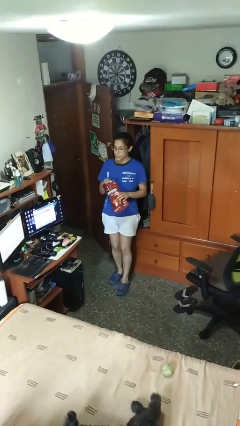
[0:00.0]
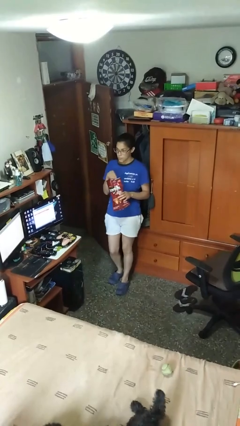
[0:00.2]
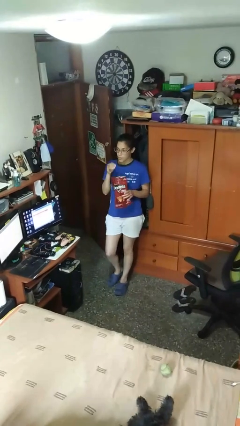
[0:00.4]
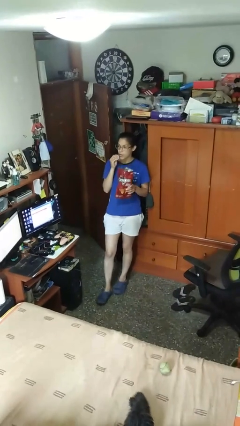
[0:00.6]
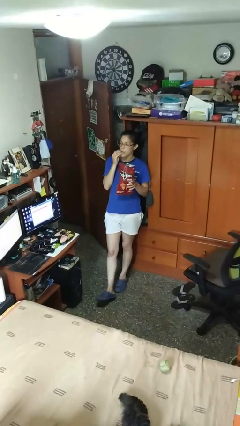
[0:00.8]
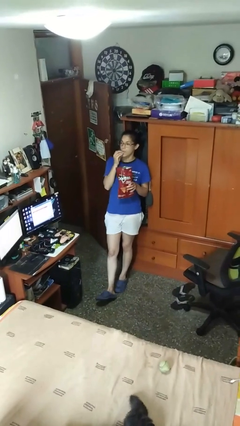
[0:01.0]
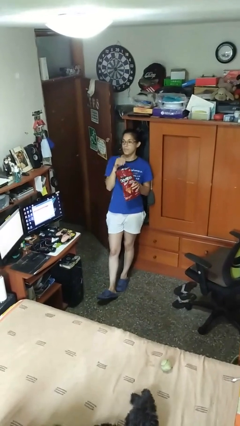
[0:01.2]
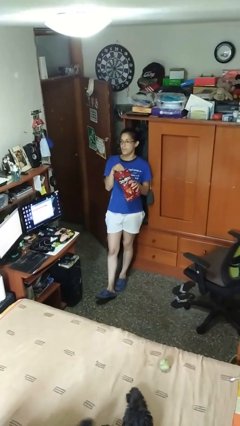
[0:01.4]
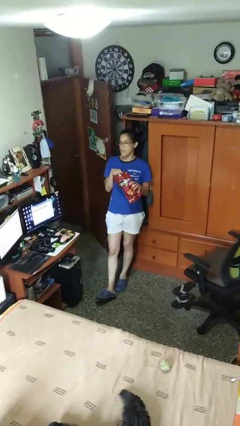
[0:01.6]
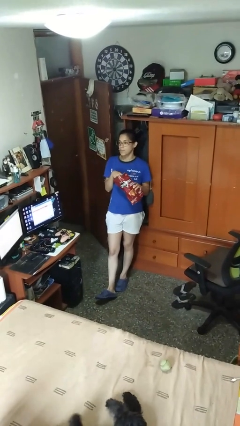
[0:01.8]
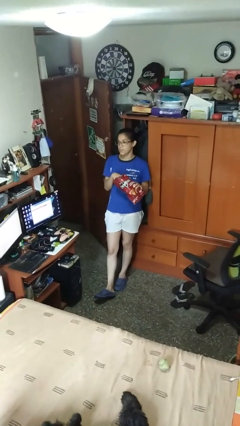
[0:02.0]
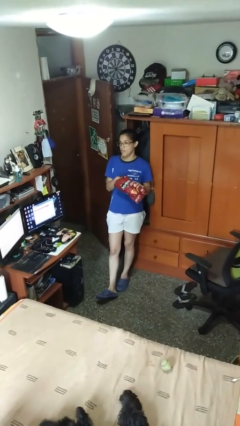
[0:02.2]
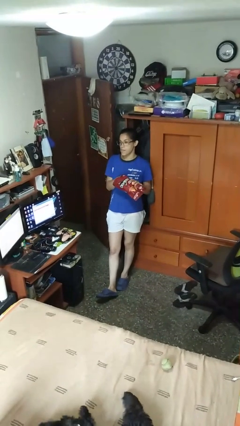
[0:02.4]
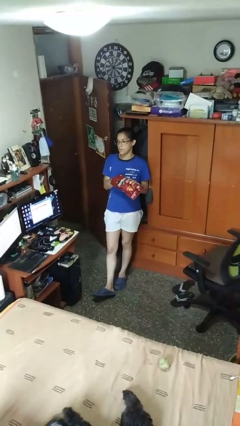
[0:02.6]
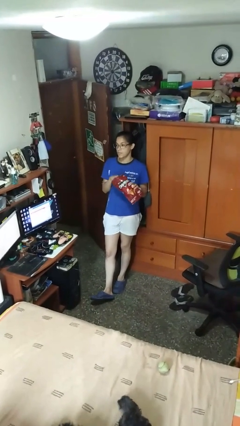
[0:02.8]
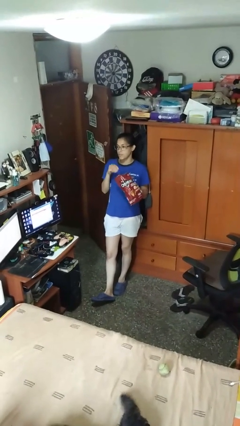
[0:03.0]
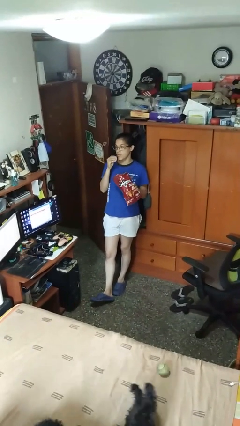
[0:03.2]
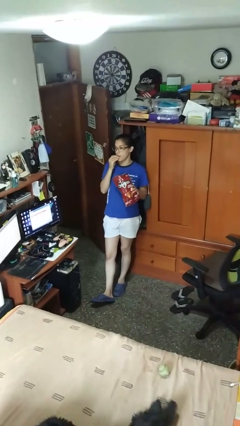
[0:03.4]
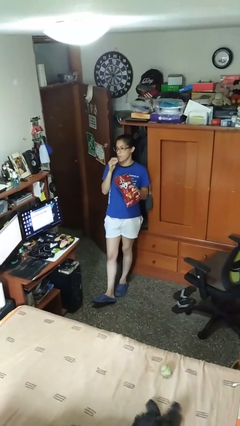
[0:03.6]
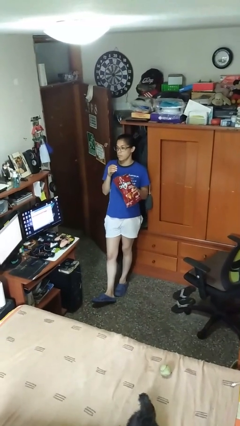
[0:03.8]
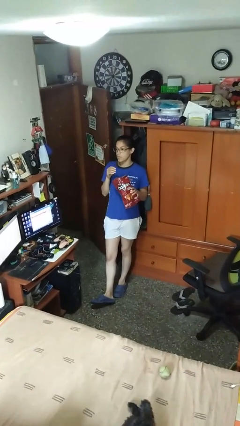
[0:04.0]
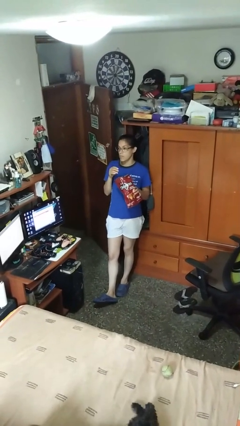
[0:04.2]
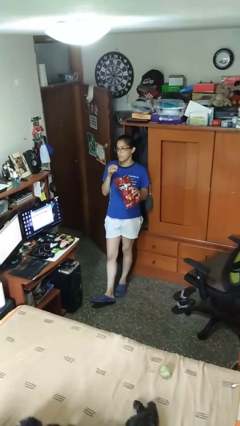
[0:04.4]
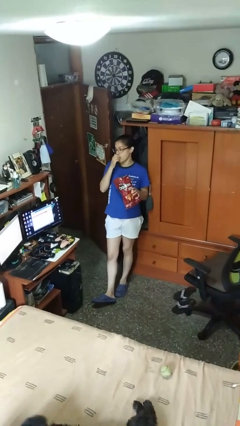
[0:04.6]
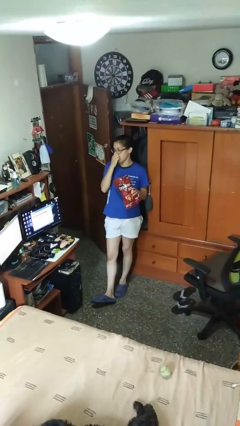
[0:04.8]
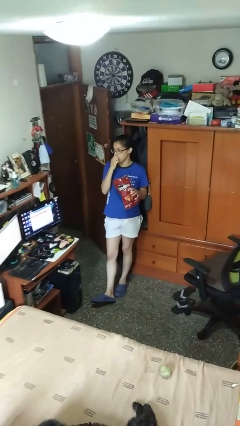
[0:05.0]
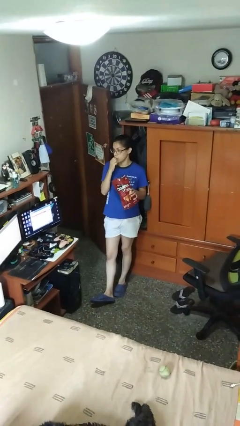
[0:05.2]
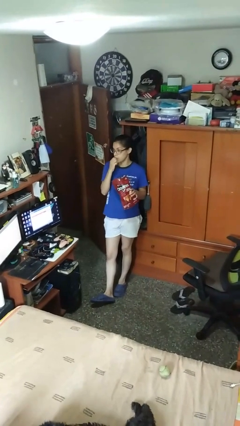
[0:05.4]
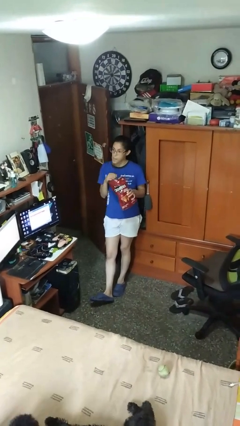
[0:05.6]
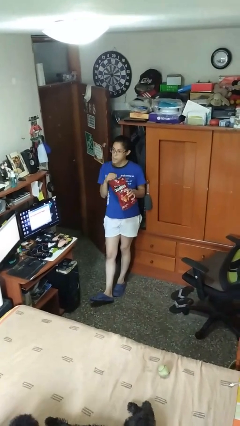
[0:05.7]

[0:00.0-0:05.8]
person eats snack from bag

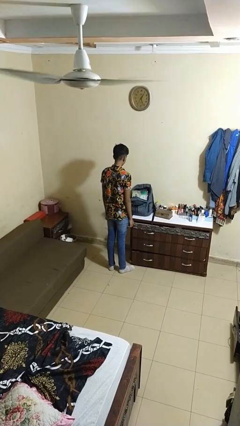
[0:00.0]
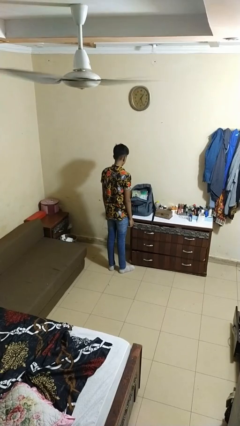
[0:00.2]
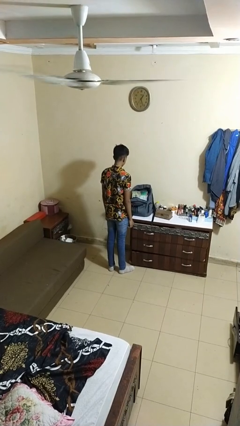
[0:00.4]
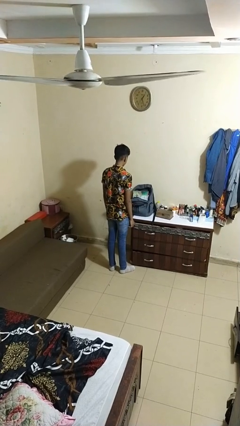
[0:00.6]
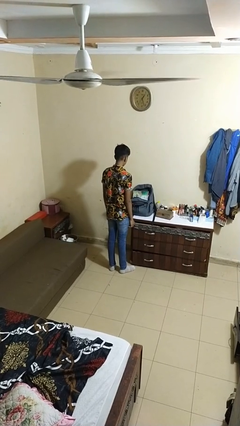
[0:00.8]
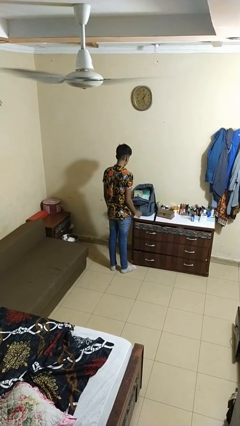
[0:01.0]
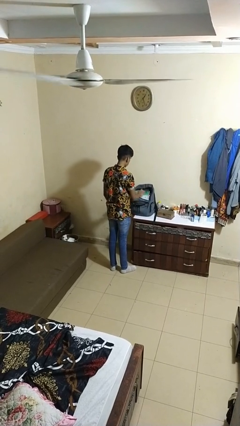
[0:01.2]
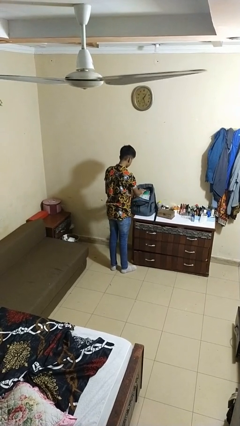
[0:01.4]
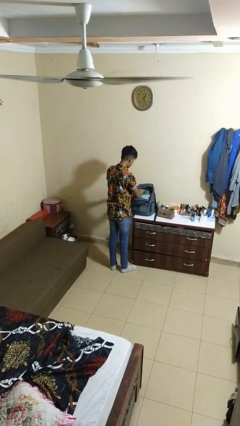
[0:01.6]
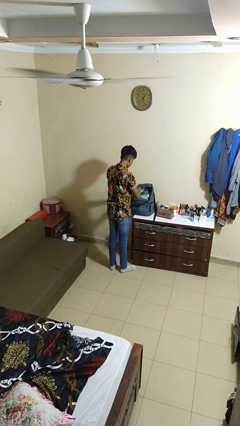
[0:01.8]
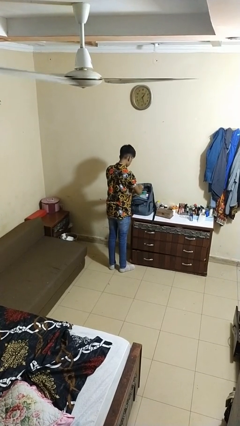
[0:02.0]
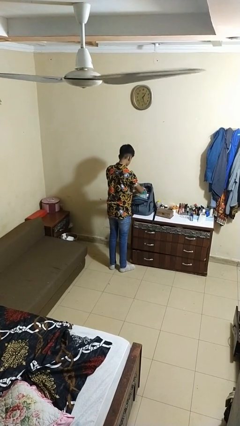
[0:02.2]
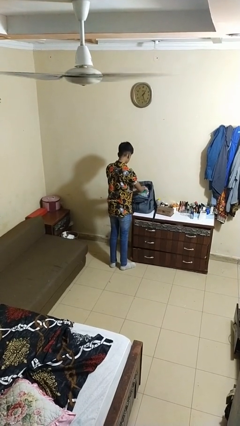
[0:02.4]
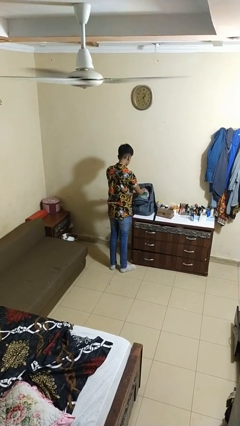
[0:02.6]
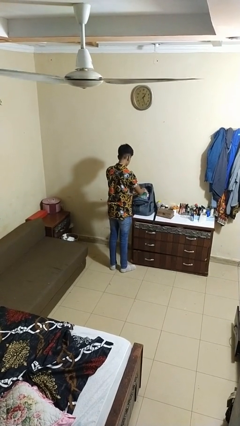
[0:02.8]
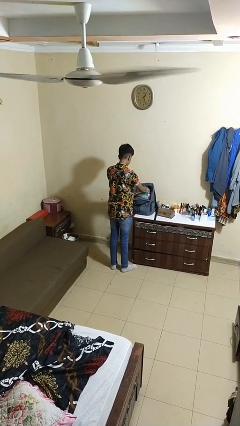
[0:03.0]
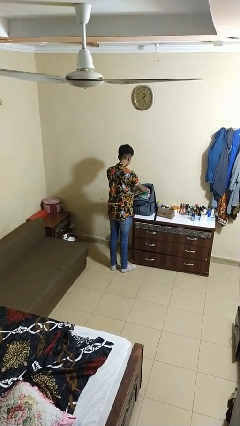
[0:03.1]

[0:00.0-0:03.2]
person searches in backpack

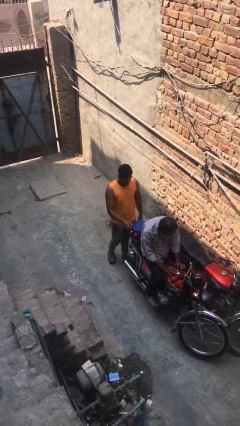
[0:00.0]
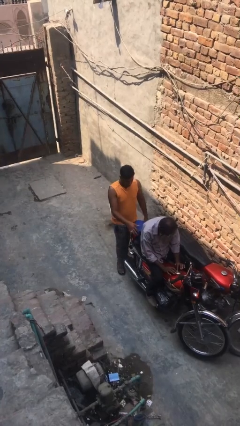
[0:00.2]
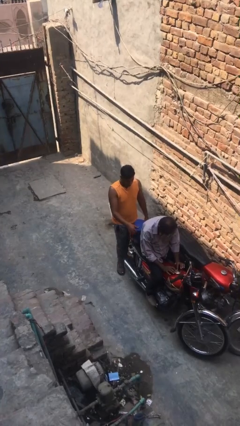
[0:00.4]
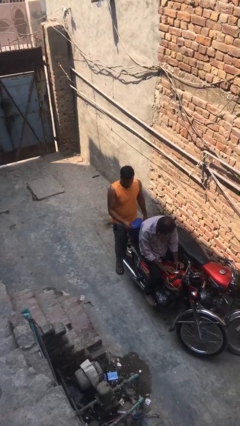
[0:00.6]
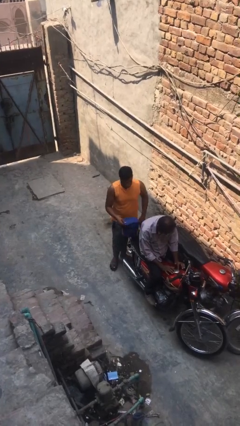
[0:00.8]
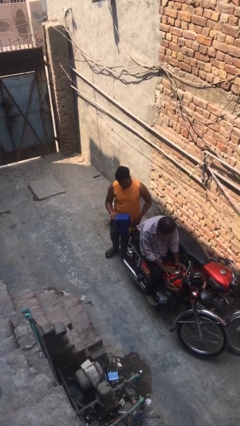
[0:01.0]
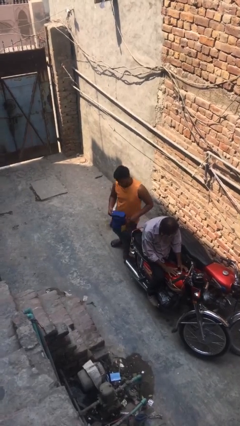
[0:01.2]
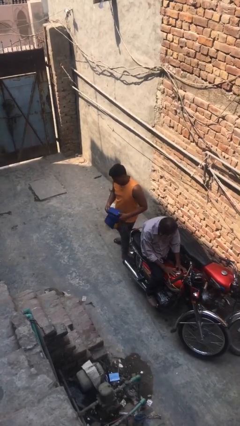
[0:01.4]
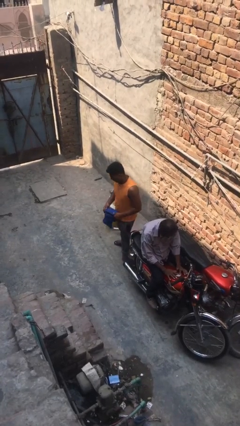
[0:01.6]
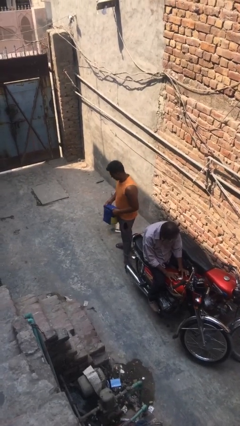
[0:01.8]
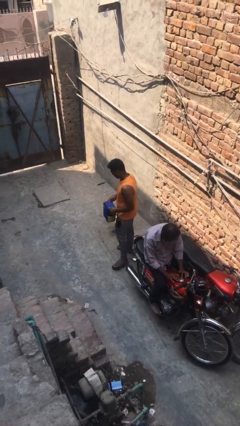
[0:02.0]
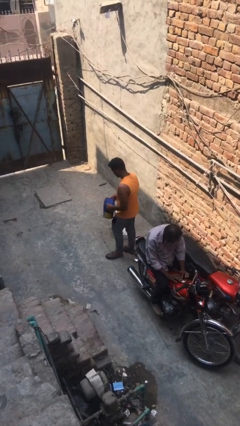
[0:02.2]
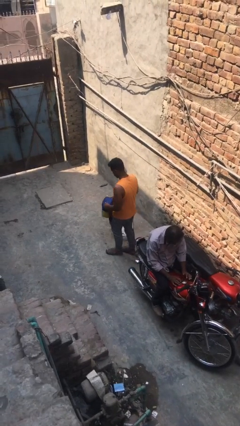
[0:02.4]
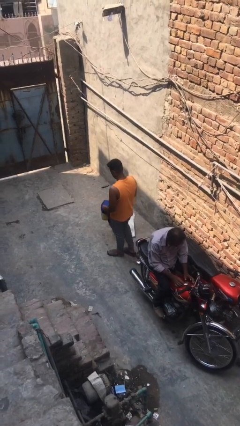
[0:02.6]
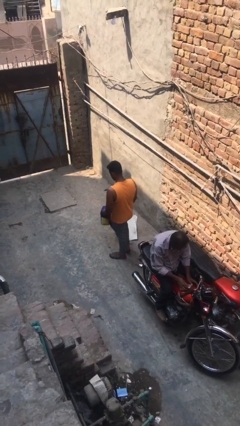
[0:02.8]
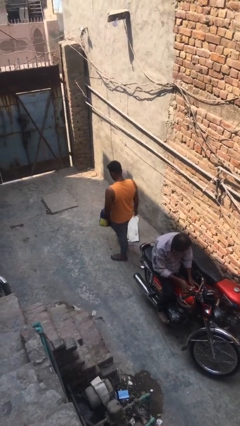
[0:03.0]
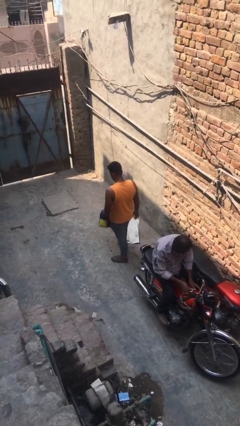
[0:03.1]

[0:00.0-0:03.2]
person steals object from person

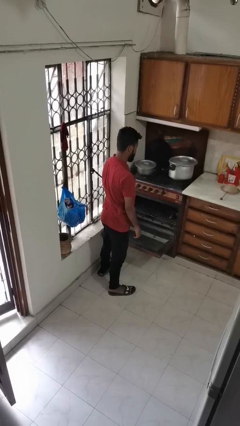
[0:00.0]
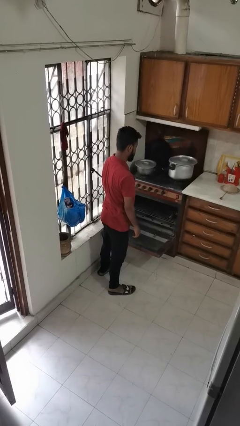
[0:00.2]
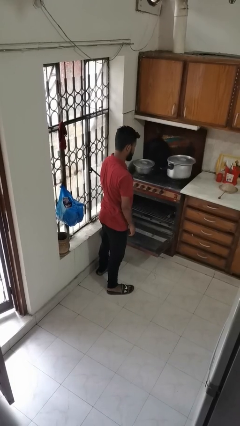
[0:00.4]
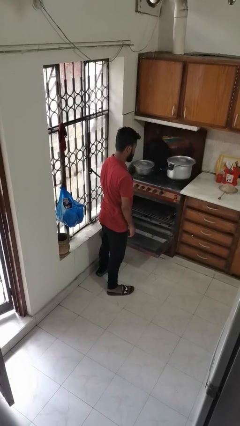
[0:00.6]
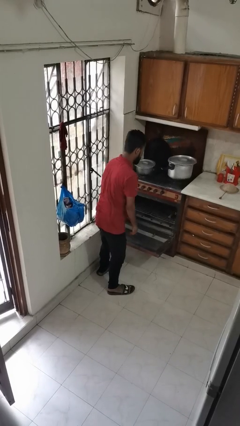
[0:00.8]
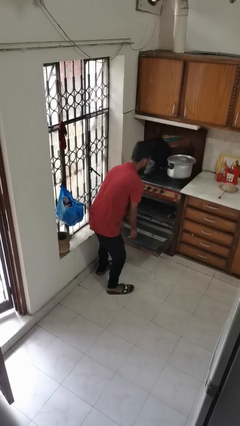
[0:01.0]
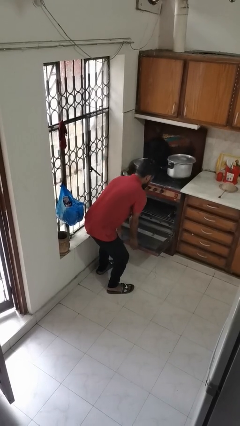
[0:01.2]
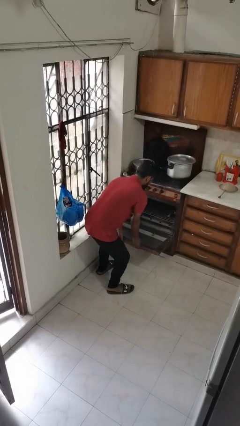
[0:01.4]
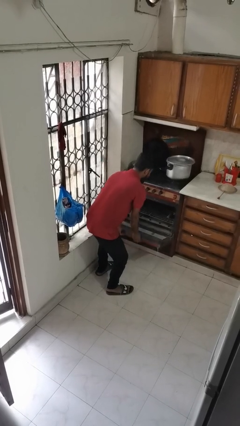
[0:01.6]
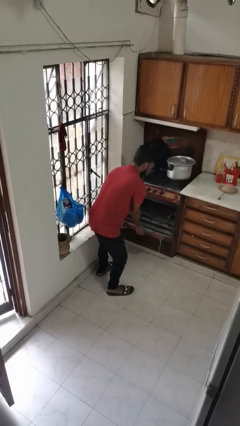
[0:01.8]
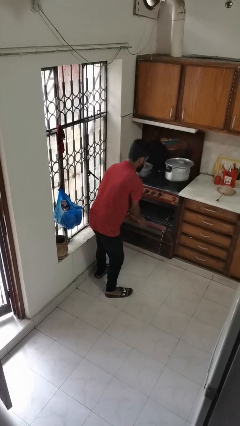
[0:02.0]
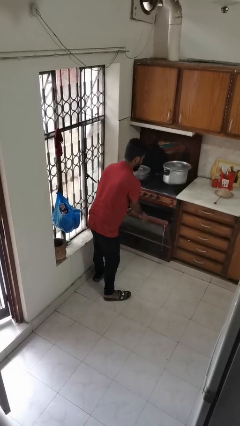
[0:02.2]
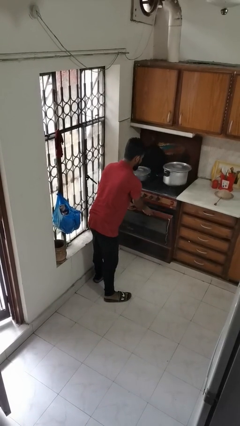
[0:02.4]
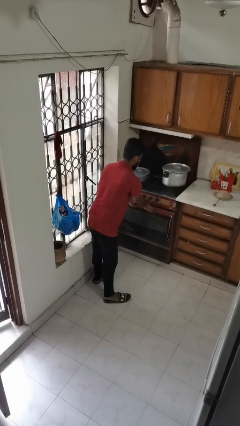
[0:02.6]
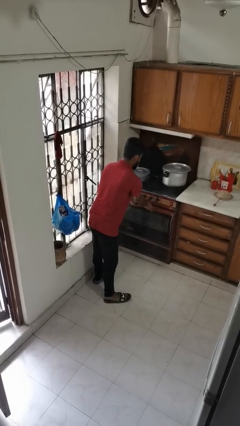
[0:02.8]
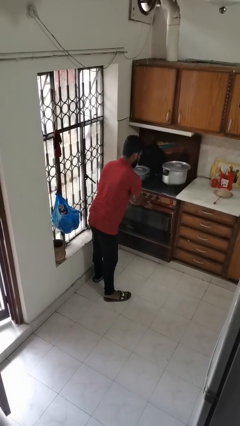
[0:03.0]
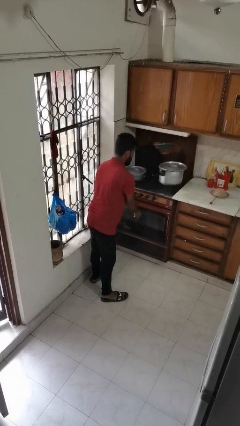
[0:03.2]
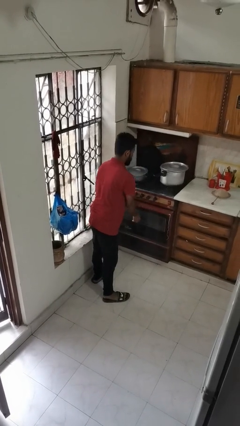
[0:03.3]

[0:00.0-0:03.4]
person closes oven door

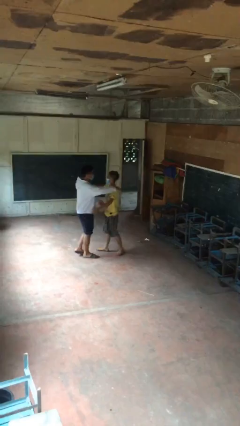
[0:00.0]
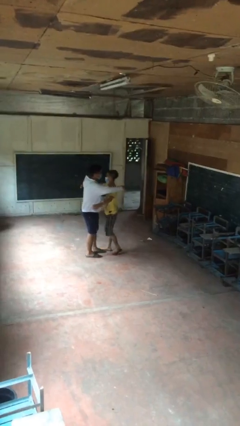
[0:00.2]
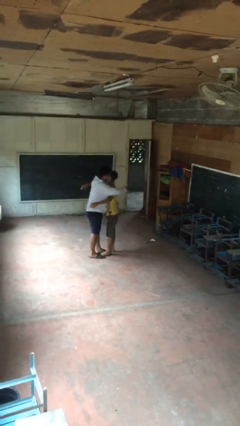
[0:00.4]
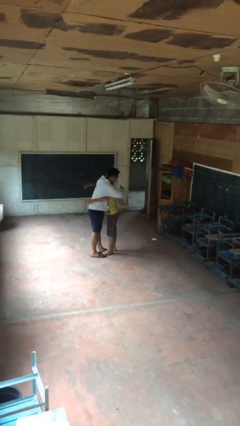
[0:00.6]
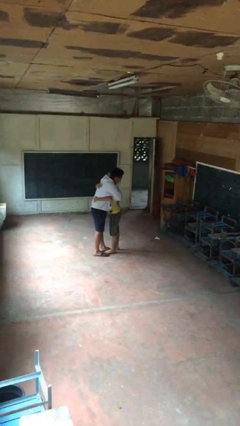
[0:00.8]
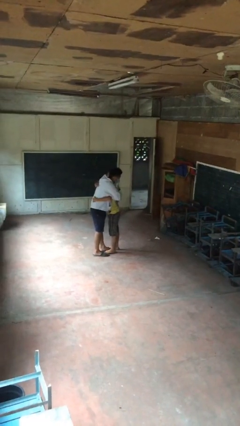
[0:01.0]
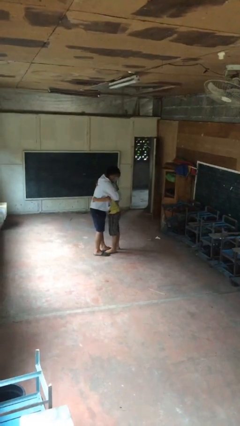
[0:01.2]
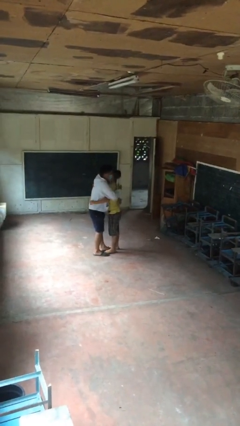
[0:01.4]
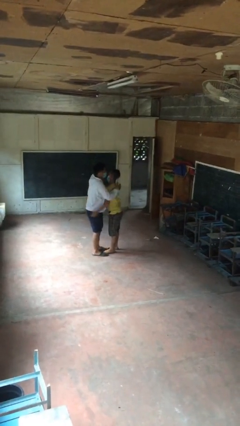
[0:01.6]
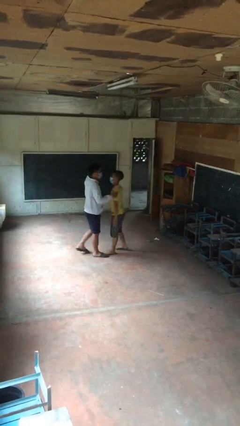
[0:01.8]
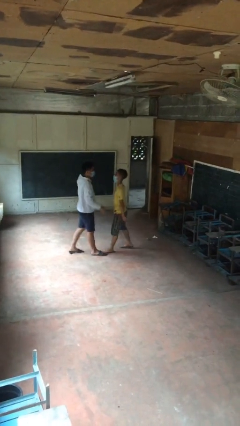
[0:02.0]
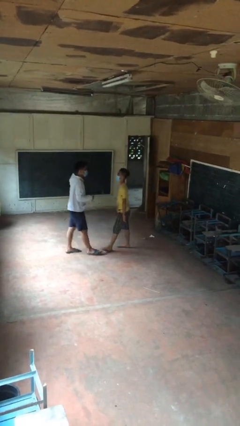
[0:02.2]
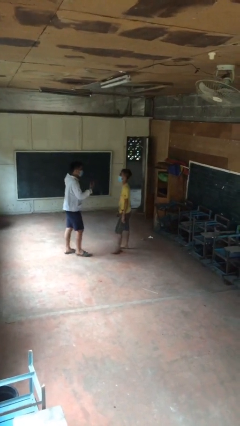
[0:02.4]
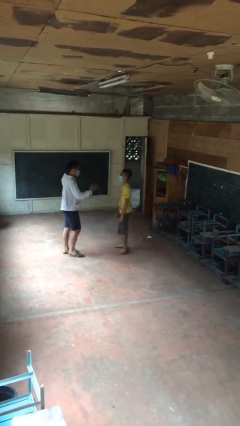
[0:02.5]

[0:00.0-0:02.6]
person embraces person
